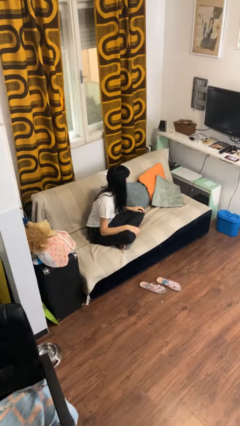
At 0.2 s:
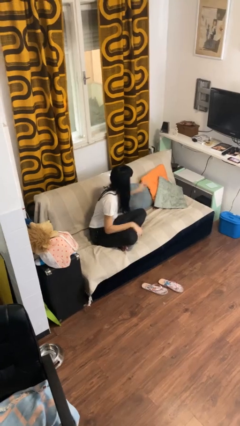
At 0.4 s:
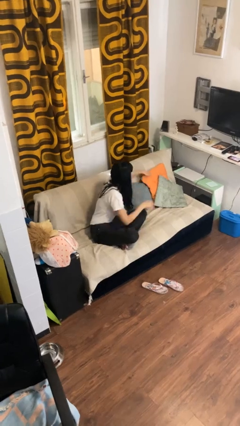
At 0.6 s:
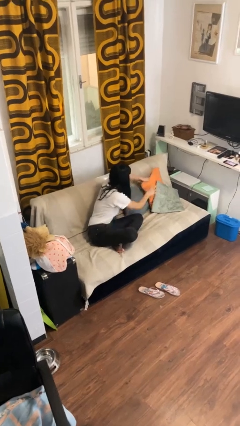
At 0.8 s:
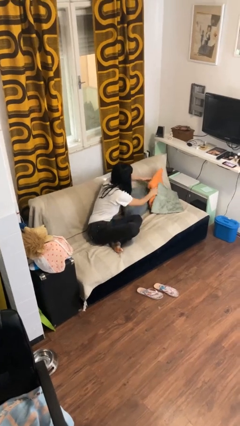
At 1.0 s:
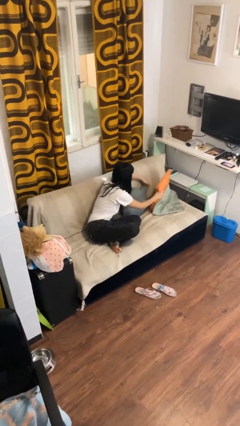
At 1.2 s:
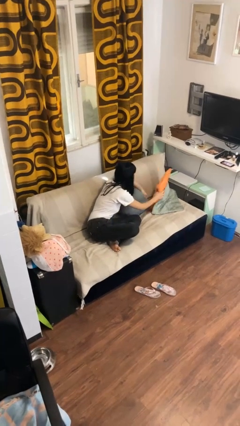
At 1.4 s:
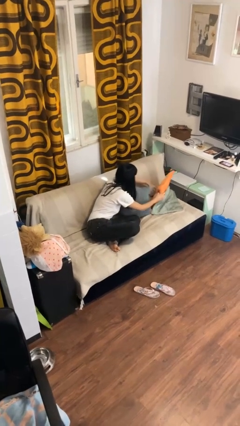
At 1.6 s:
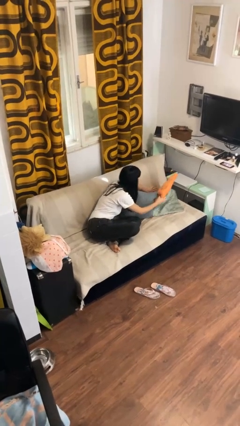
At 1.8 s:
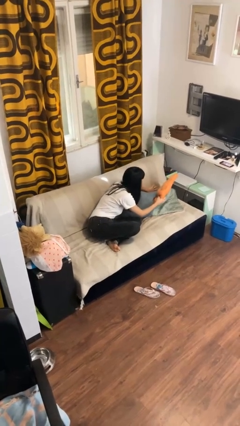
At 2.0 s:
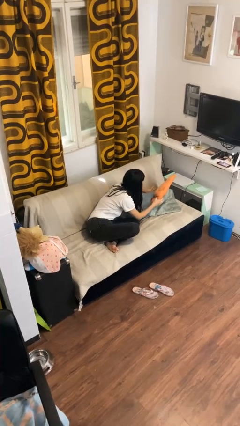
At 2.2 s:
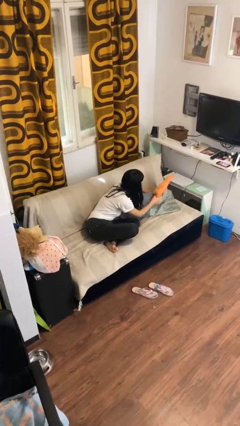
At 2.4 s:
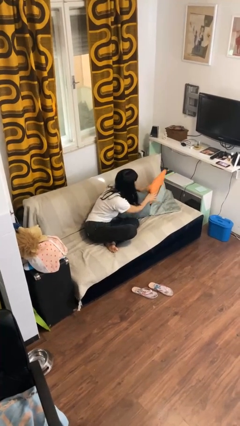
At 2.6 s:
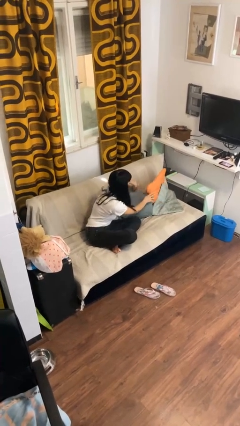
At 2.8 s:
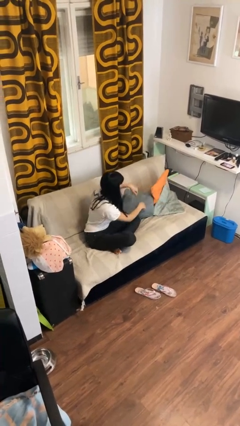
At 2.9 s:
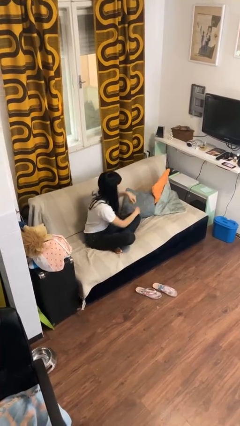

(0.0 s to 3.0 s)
person searches in couch

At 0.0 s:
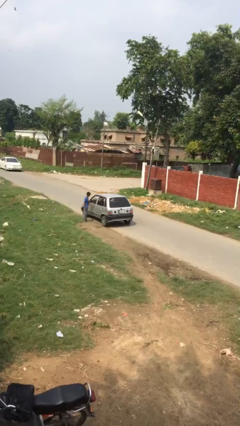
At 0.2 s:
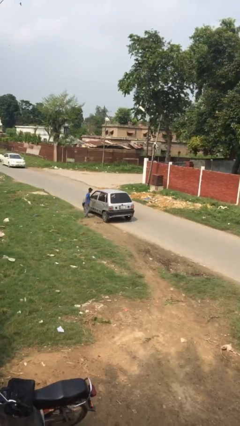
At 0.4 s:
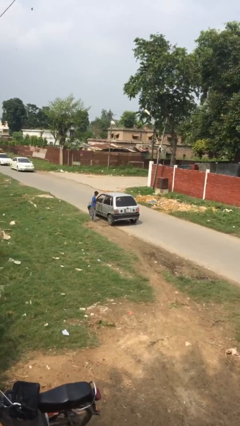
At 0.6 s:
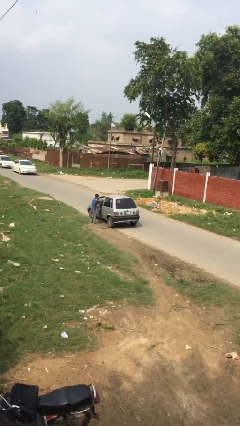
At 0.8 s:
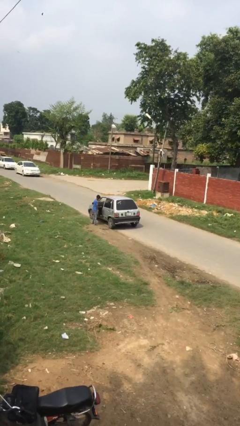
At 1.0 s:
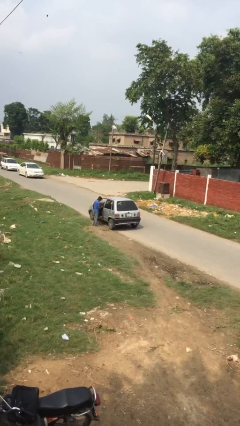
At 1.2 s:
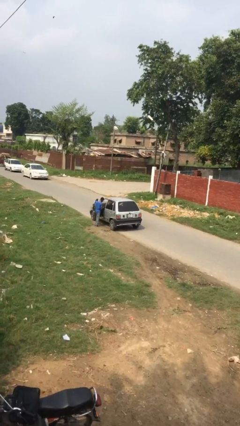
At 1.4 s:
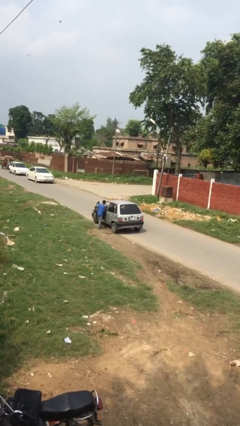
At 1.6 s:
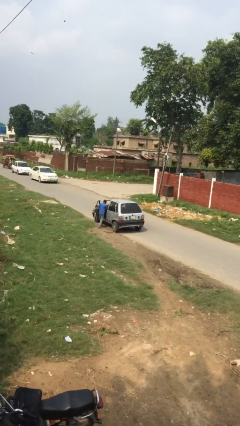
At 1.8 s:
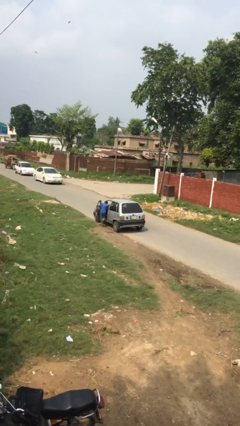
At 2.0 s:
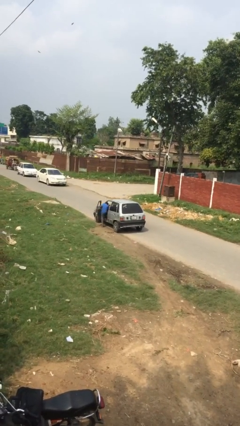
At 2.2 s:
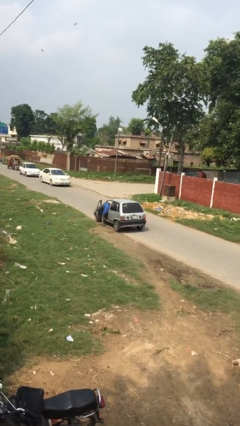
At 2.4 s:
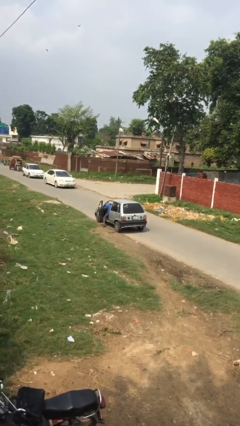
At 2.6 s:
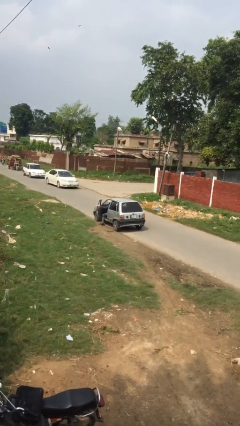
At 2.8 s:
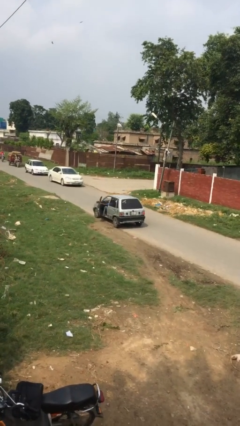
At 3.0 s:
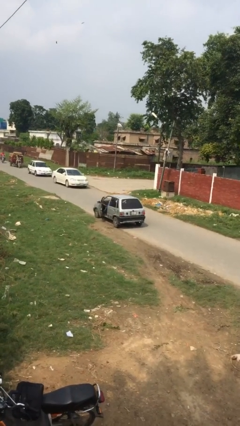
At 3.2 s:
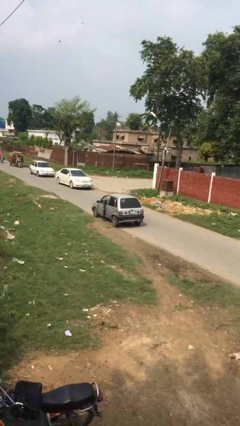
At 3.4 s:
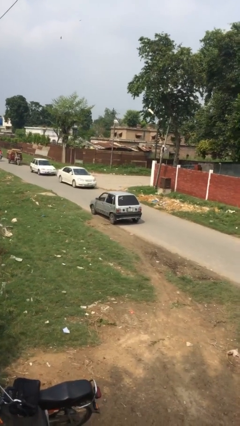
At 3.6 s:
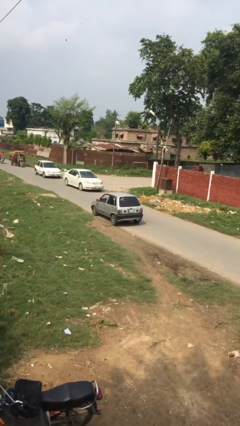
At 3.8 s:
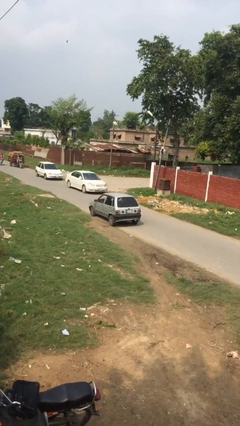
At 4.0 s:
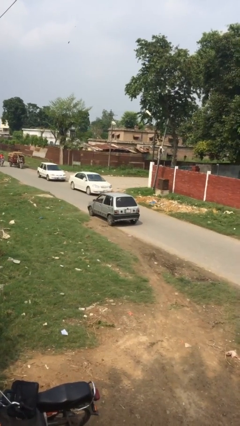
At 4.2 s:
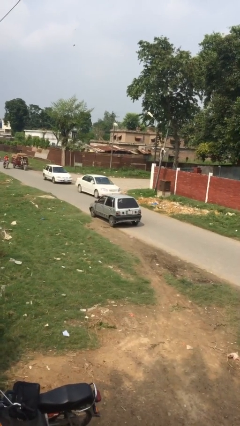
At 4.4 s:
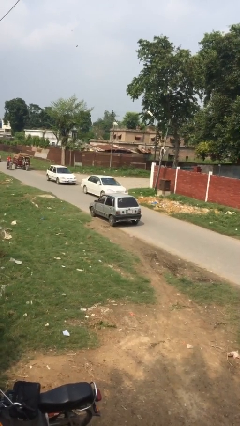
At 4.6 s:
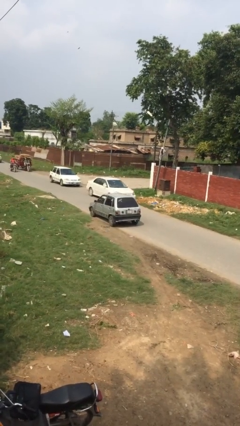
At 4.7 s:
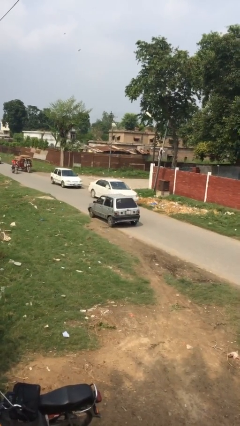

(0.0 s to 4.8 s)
car picks up person

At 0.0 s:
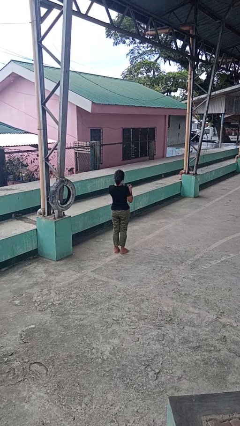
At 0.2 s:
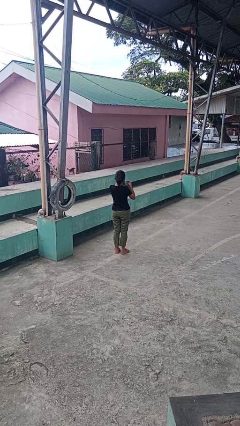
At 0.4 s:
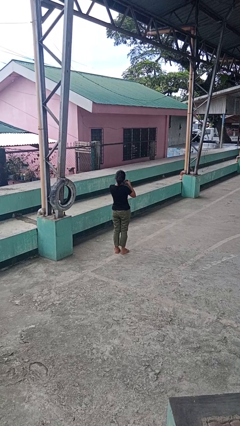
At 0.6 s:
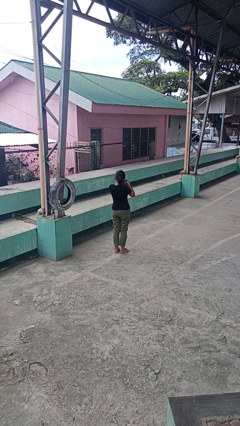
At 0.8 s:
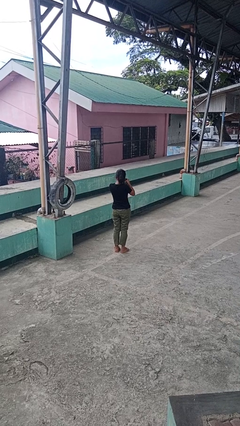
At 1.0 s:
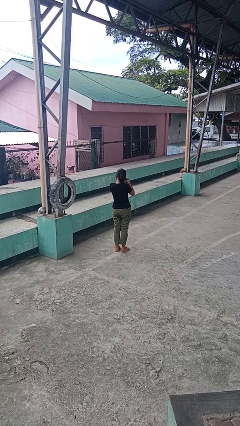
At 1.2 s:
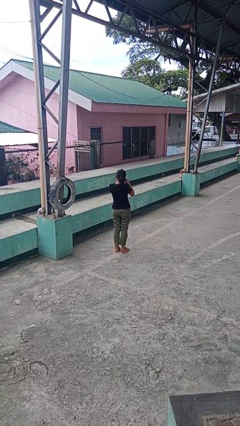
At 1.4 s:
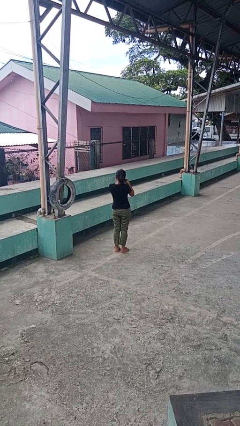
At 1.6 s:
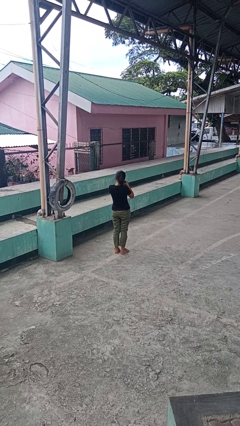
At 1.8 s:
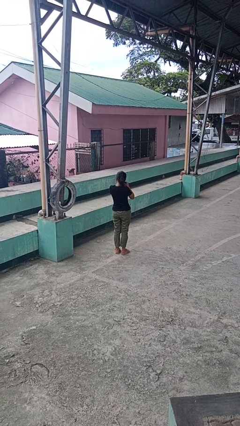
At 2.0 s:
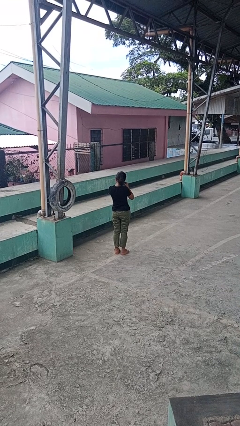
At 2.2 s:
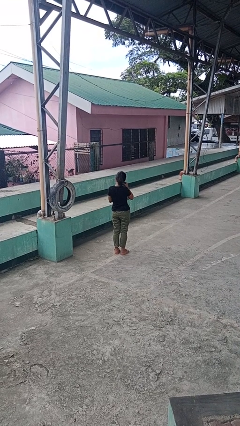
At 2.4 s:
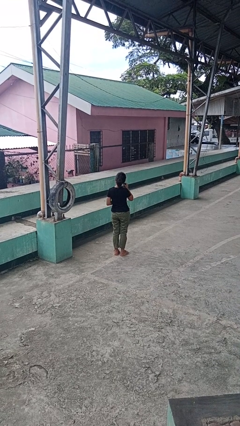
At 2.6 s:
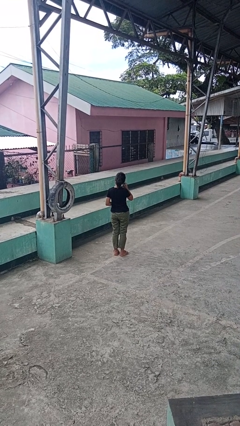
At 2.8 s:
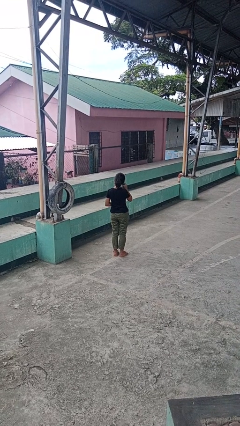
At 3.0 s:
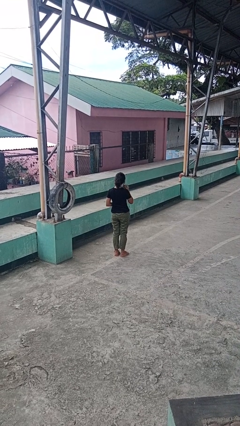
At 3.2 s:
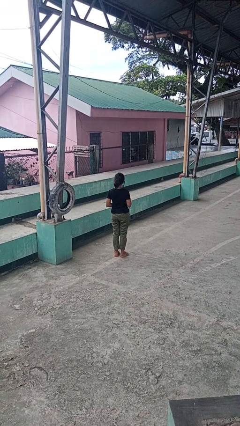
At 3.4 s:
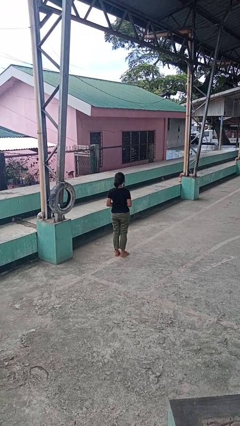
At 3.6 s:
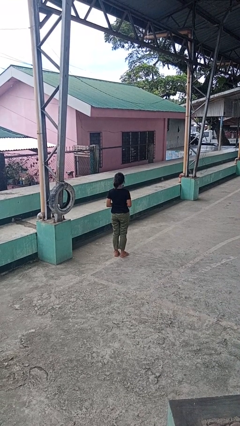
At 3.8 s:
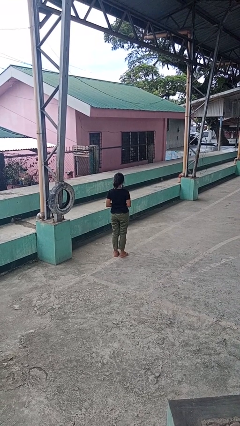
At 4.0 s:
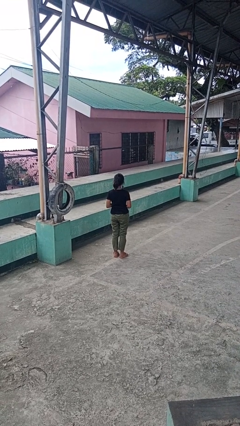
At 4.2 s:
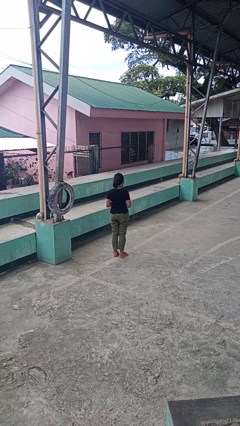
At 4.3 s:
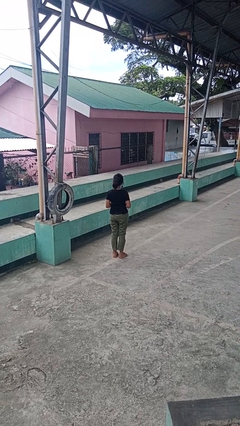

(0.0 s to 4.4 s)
person puts on earrings

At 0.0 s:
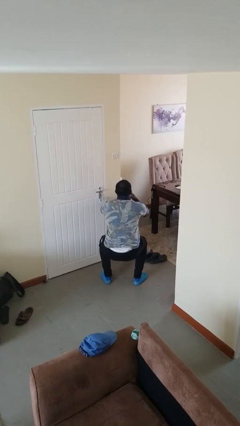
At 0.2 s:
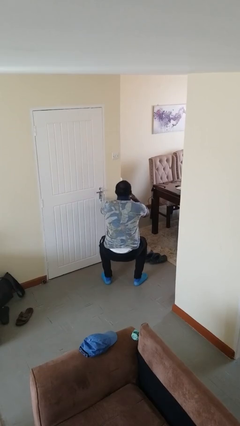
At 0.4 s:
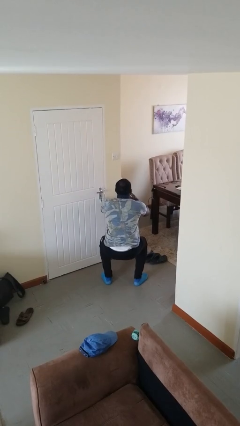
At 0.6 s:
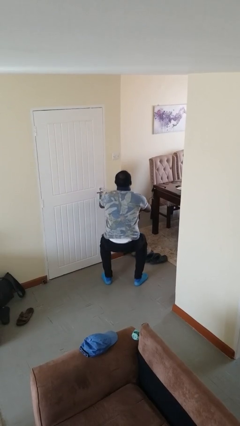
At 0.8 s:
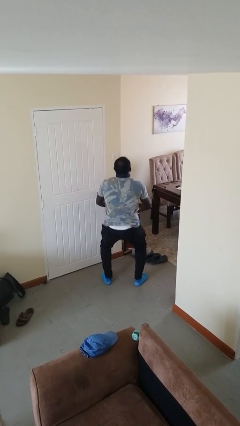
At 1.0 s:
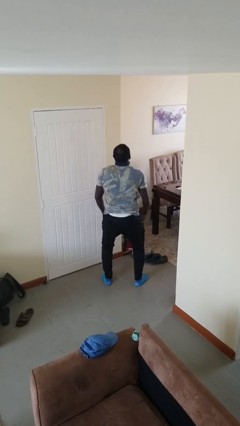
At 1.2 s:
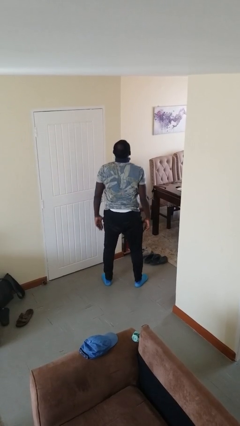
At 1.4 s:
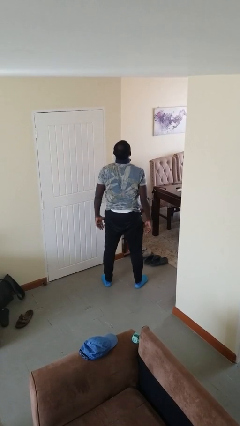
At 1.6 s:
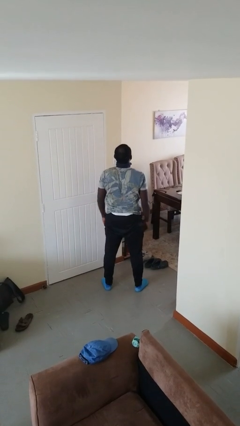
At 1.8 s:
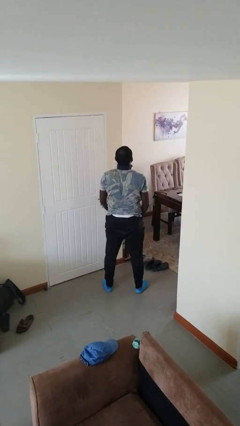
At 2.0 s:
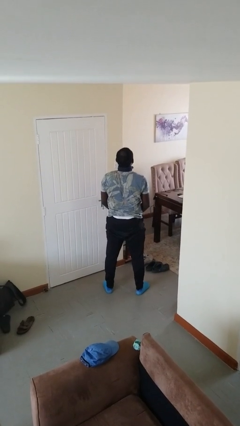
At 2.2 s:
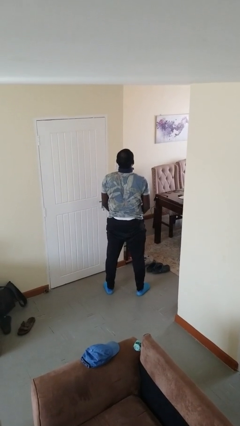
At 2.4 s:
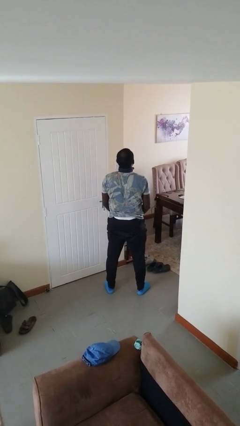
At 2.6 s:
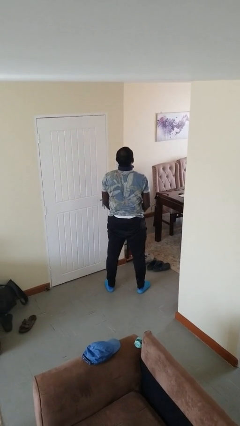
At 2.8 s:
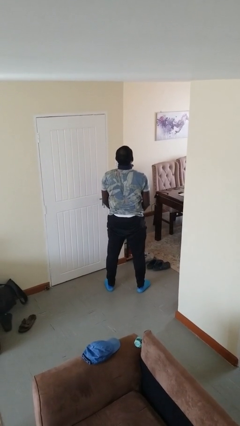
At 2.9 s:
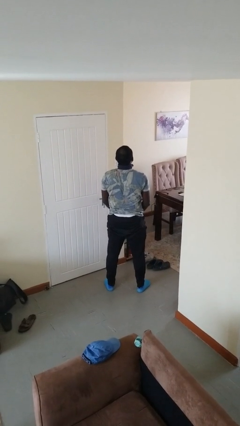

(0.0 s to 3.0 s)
person stands up

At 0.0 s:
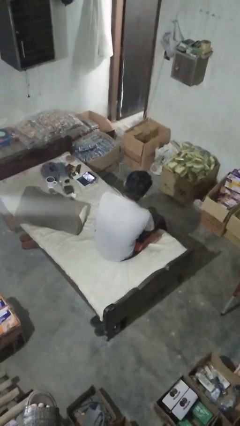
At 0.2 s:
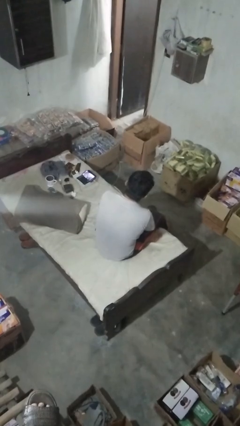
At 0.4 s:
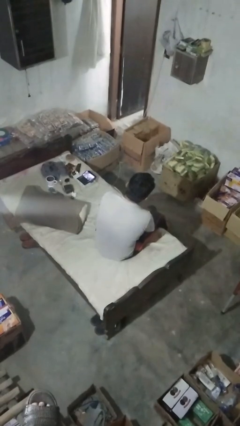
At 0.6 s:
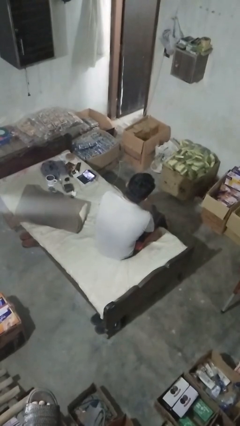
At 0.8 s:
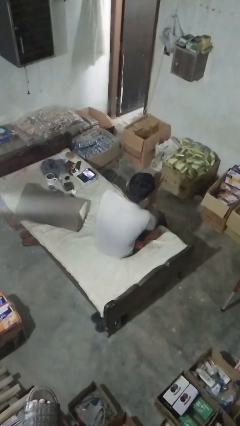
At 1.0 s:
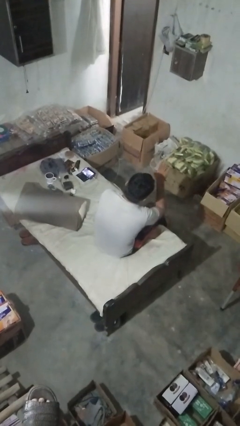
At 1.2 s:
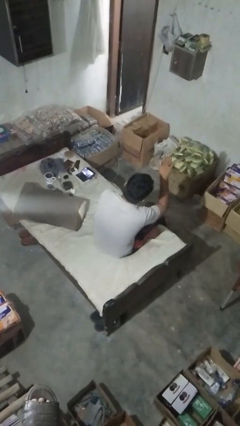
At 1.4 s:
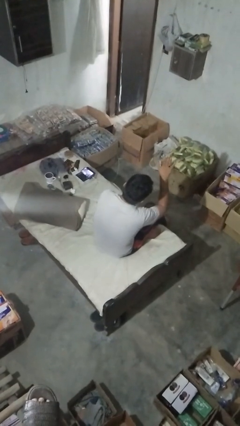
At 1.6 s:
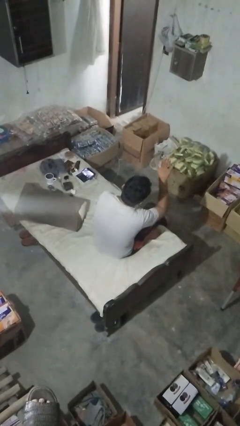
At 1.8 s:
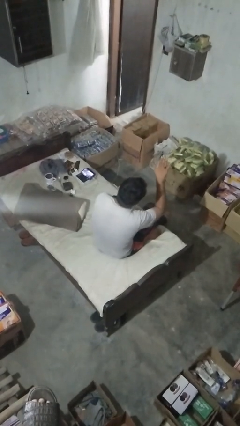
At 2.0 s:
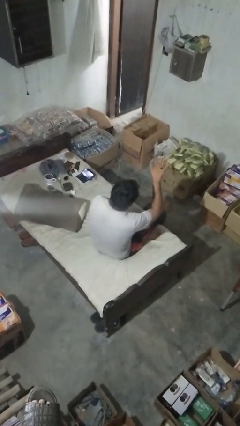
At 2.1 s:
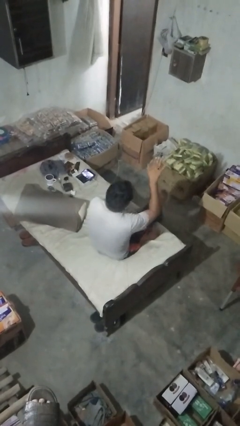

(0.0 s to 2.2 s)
person gestures stop
